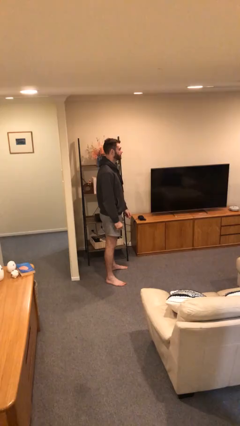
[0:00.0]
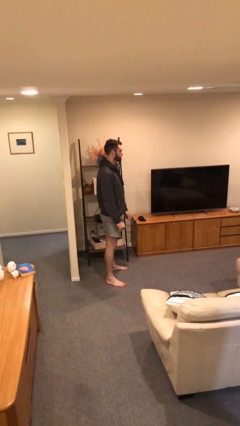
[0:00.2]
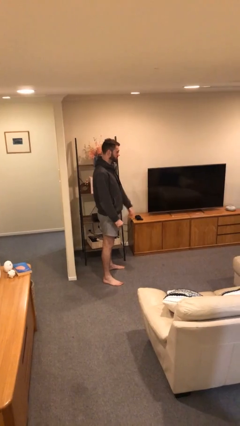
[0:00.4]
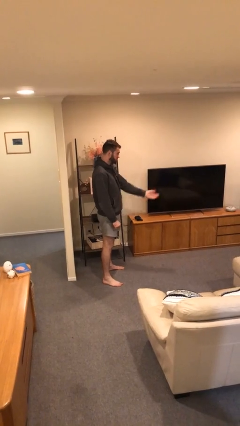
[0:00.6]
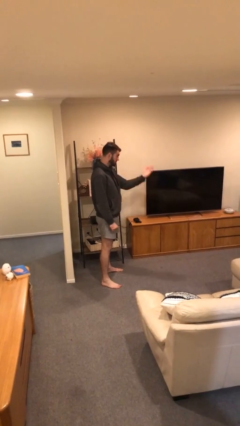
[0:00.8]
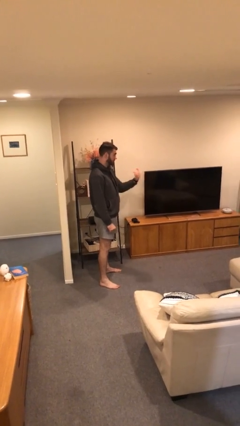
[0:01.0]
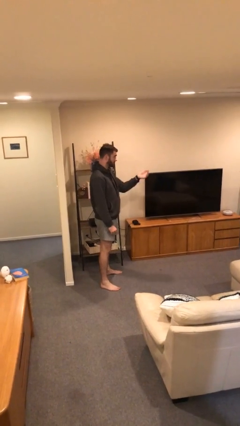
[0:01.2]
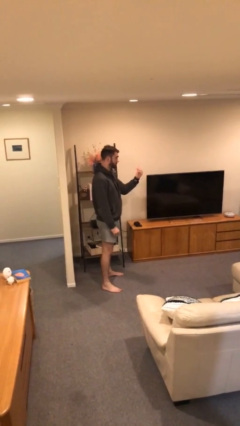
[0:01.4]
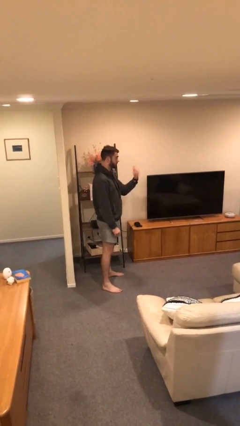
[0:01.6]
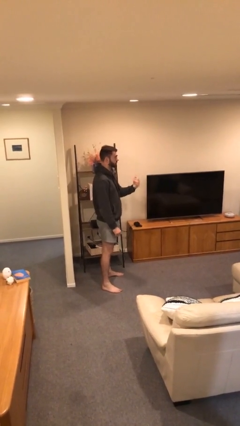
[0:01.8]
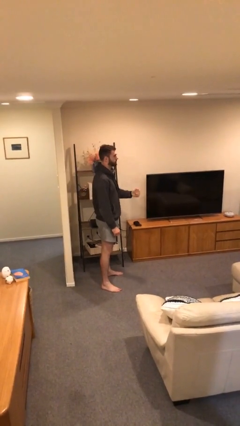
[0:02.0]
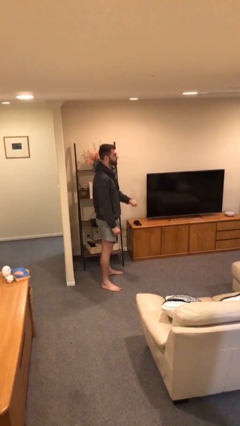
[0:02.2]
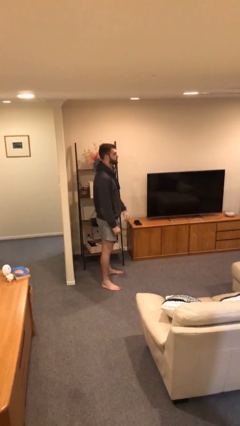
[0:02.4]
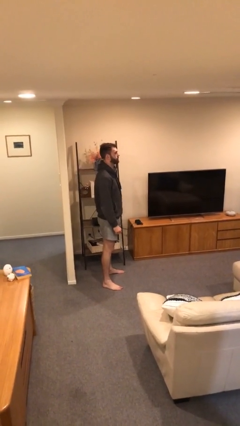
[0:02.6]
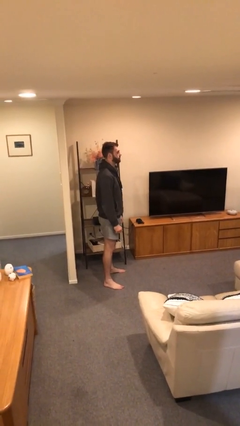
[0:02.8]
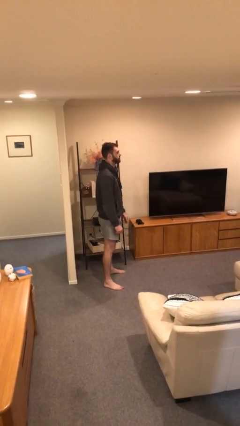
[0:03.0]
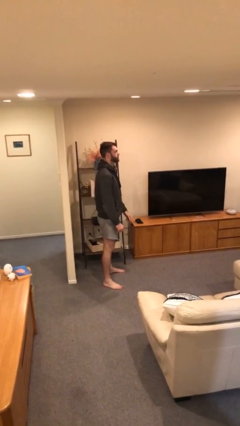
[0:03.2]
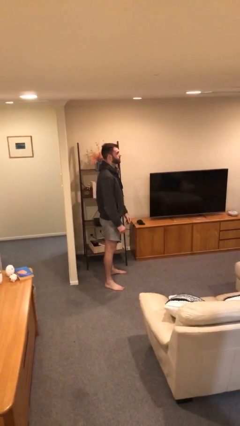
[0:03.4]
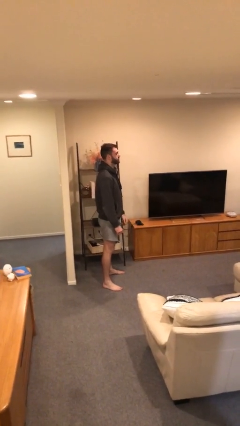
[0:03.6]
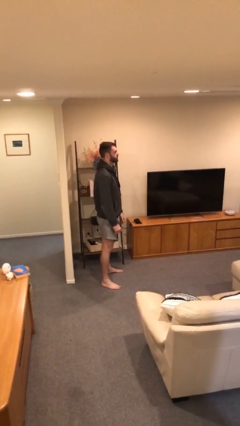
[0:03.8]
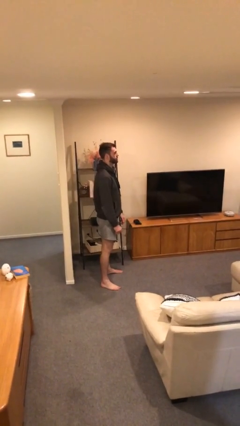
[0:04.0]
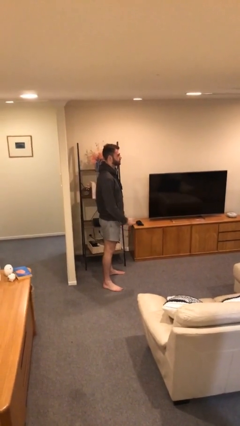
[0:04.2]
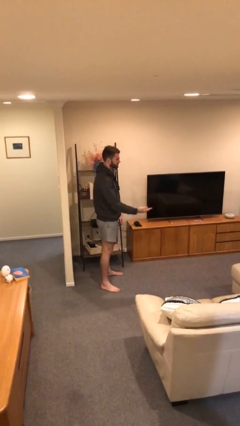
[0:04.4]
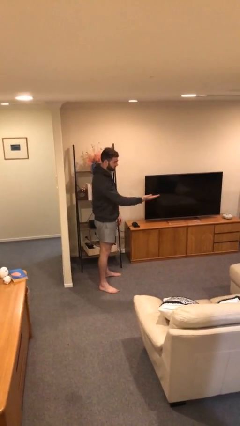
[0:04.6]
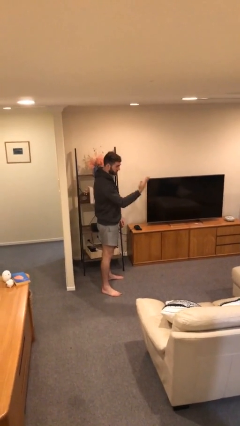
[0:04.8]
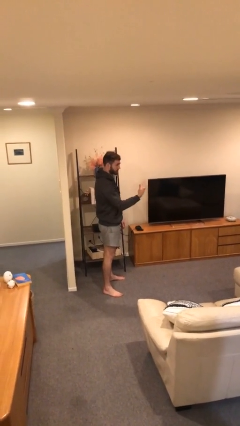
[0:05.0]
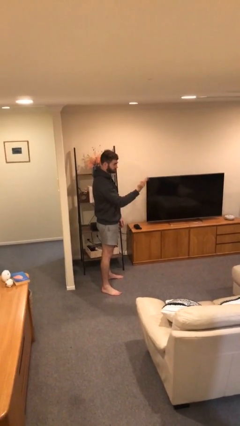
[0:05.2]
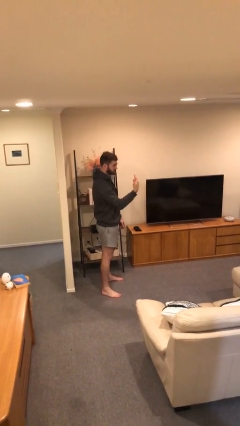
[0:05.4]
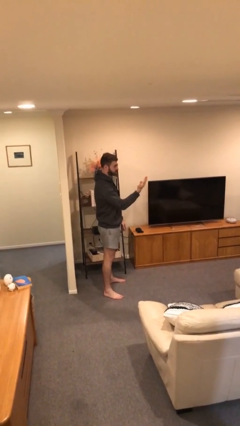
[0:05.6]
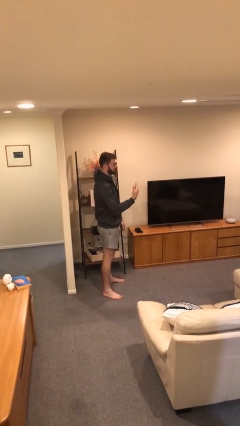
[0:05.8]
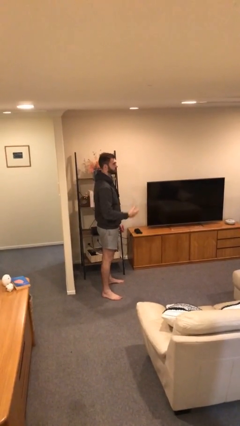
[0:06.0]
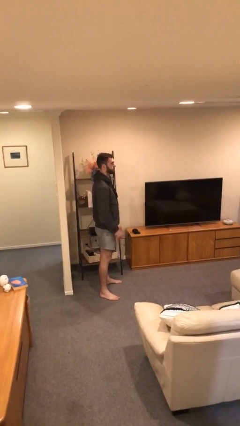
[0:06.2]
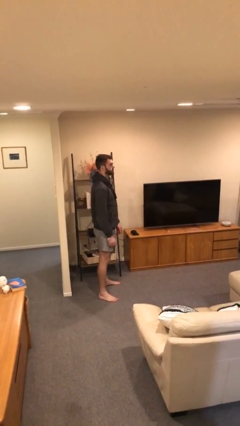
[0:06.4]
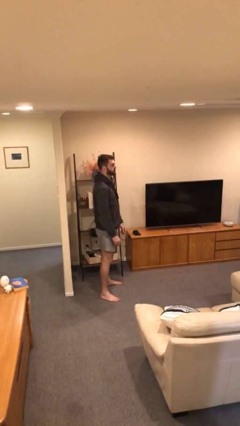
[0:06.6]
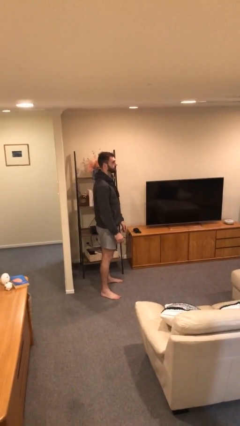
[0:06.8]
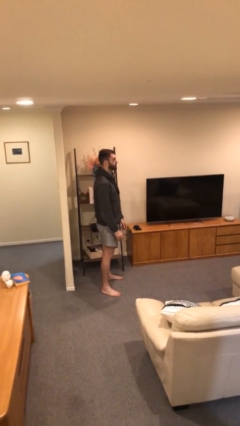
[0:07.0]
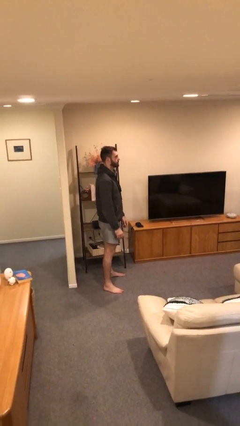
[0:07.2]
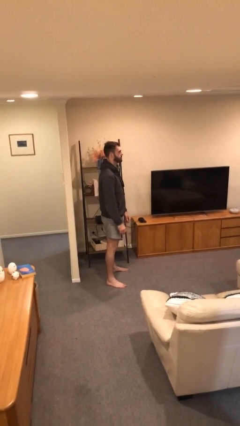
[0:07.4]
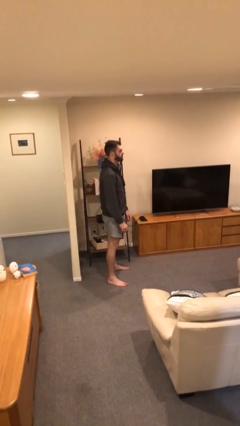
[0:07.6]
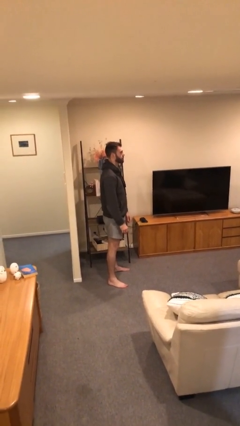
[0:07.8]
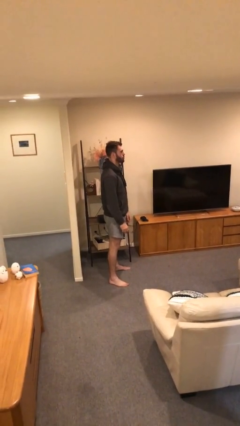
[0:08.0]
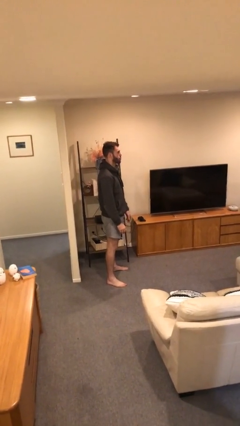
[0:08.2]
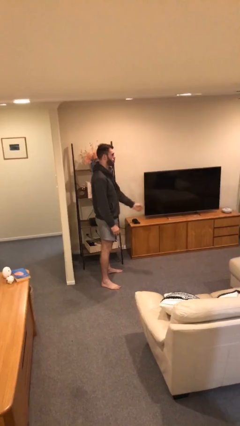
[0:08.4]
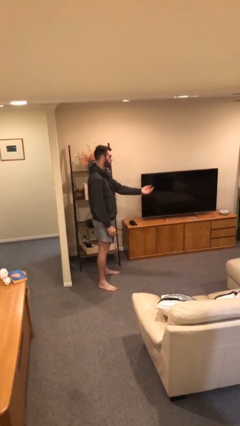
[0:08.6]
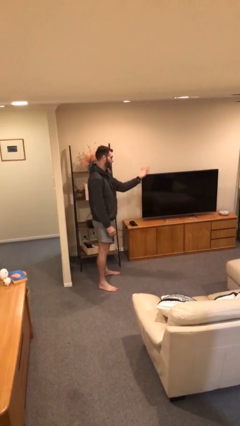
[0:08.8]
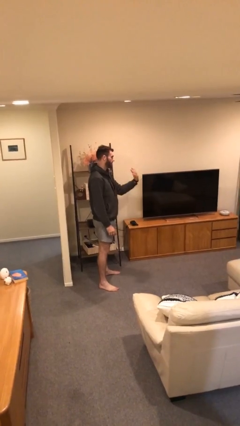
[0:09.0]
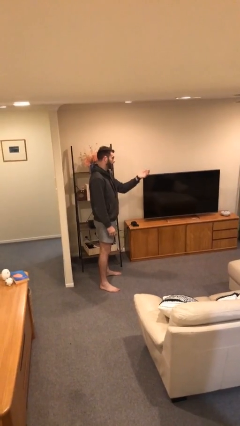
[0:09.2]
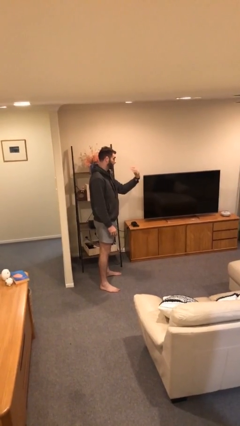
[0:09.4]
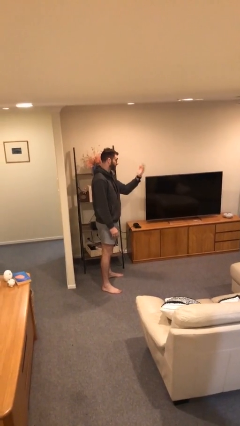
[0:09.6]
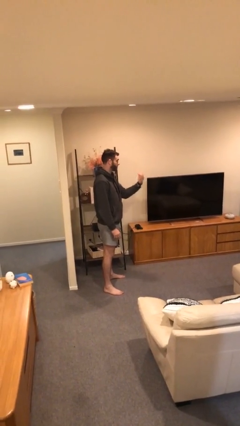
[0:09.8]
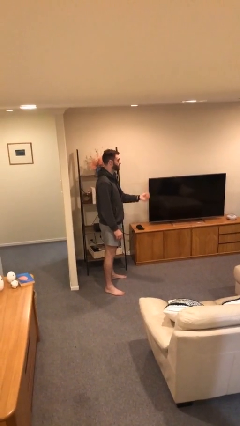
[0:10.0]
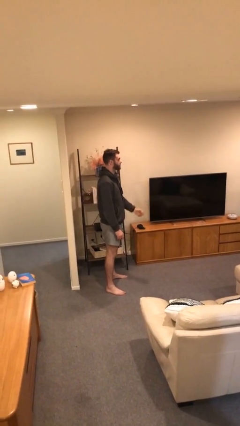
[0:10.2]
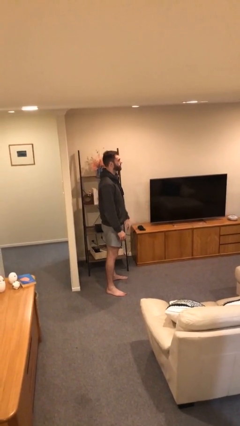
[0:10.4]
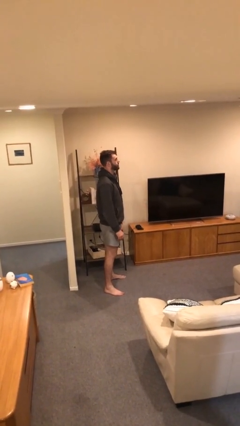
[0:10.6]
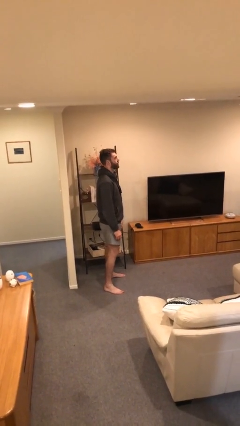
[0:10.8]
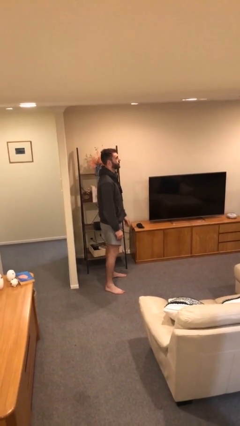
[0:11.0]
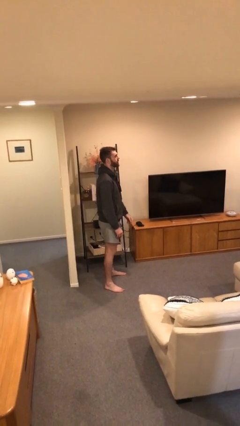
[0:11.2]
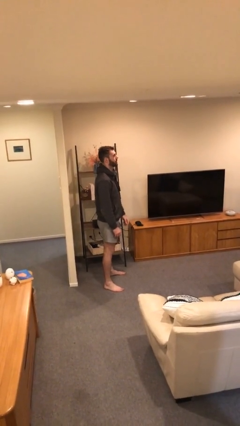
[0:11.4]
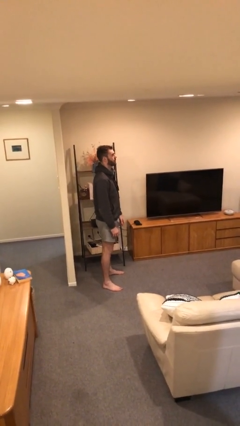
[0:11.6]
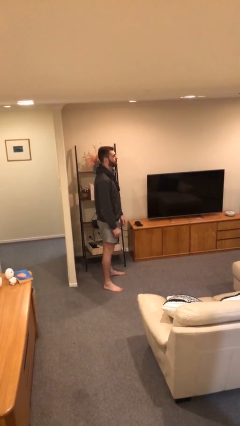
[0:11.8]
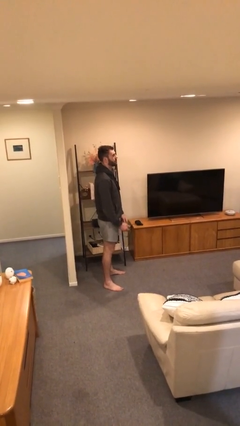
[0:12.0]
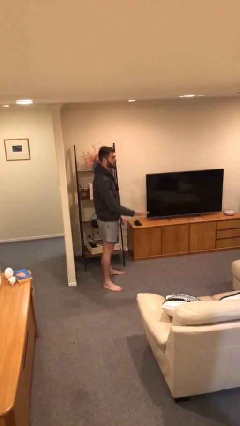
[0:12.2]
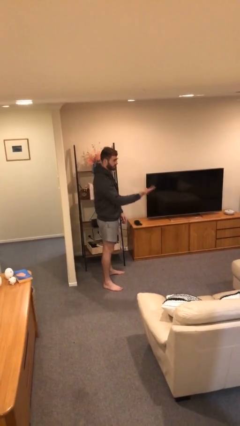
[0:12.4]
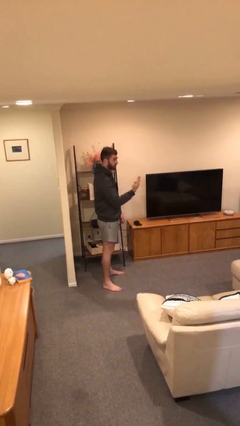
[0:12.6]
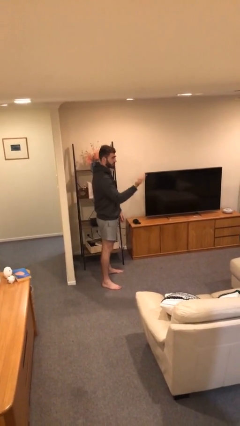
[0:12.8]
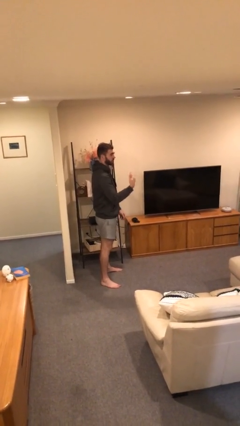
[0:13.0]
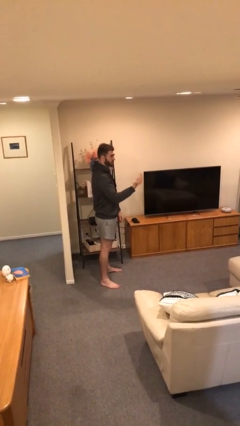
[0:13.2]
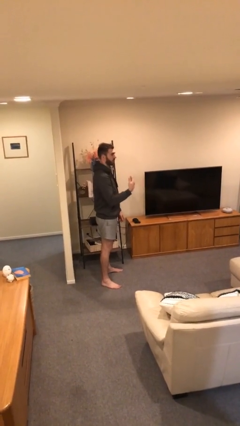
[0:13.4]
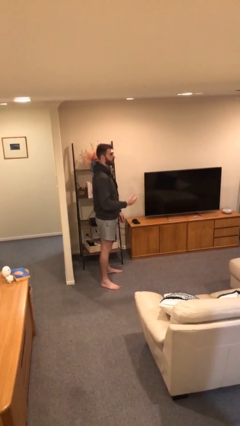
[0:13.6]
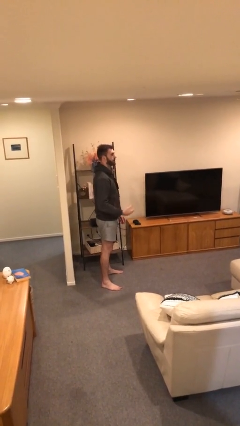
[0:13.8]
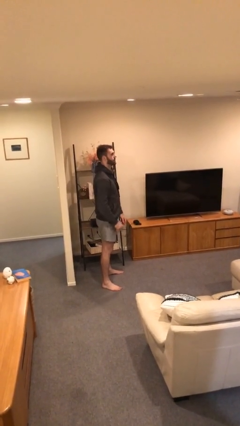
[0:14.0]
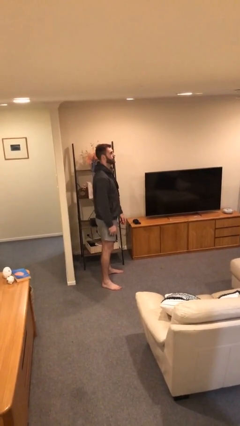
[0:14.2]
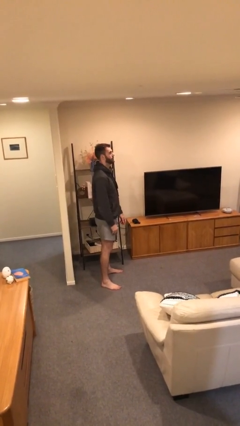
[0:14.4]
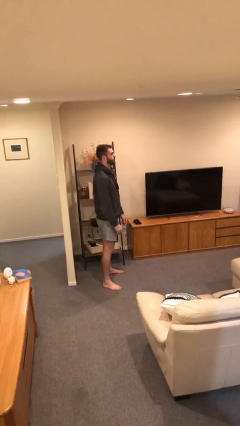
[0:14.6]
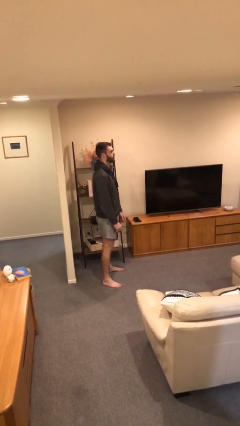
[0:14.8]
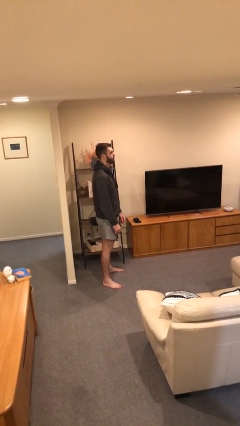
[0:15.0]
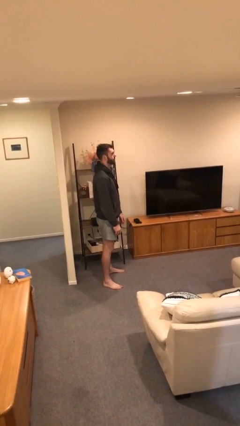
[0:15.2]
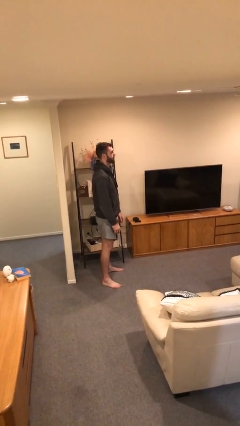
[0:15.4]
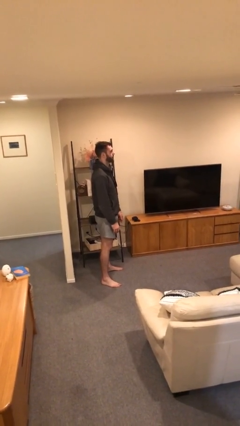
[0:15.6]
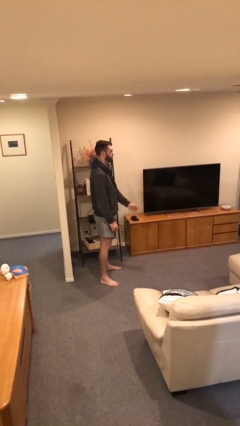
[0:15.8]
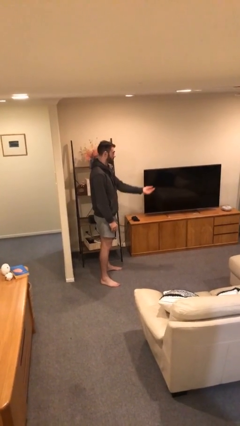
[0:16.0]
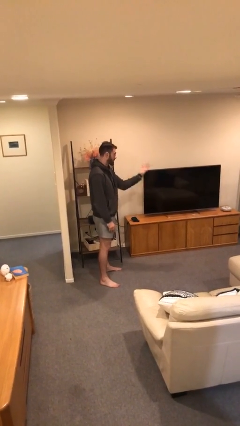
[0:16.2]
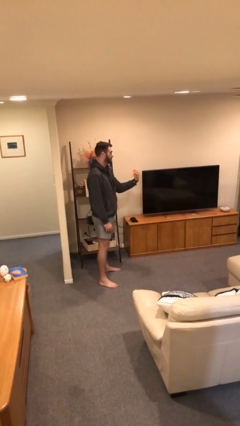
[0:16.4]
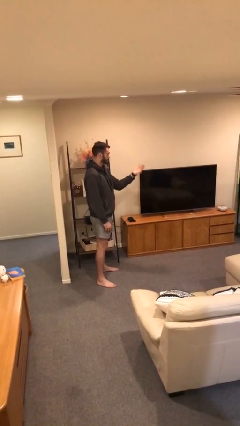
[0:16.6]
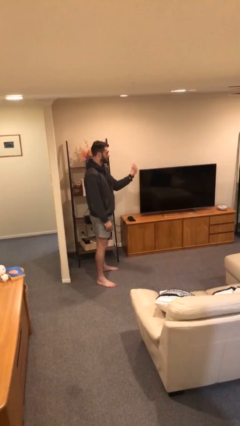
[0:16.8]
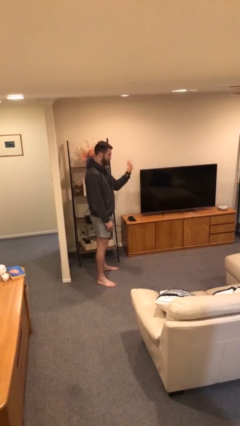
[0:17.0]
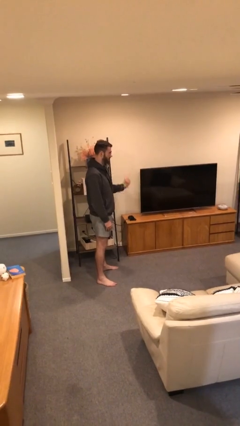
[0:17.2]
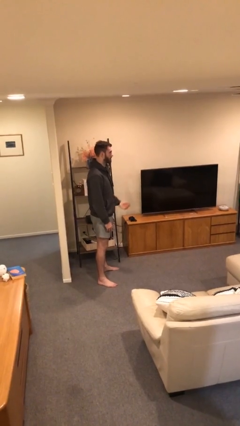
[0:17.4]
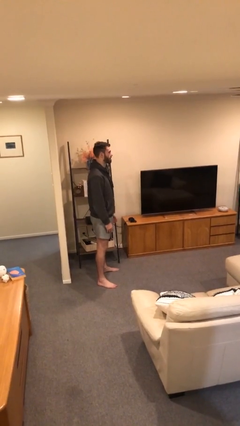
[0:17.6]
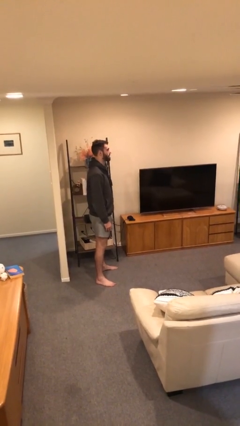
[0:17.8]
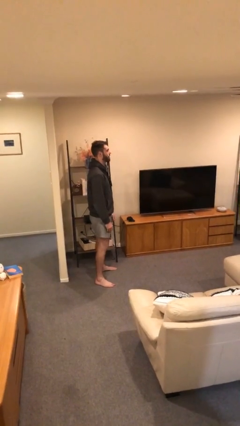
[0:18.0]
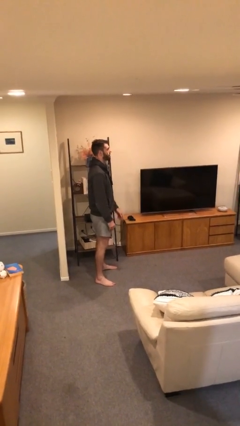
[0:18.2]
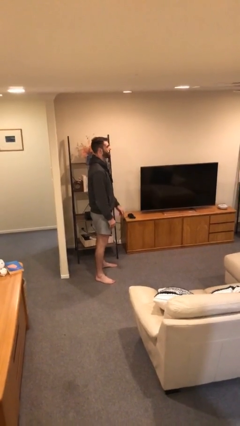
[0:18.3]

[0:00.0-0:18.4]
person gestures come here
